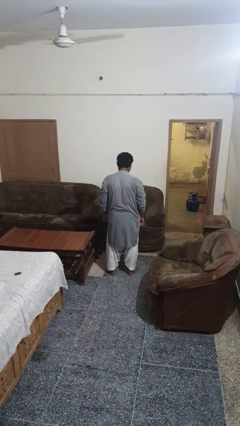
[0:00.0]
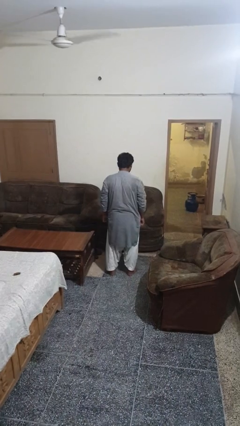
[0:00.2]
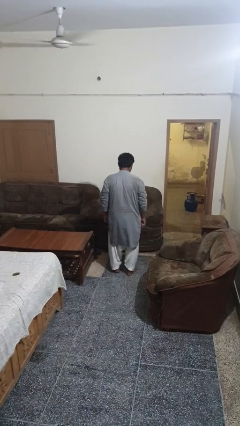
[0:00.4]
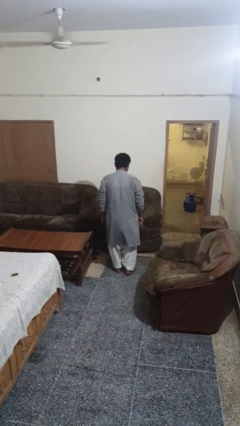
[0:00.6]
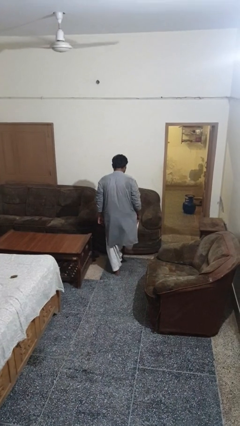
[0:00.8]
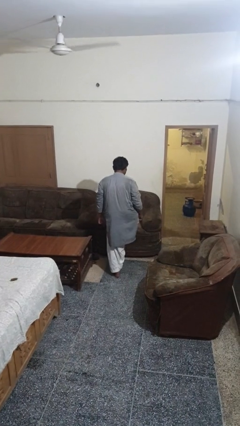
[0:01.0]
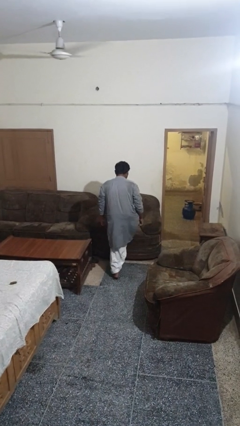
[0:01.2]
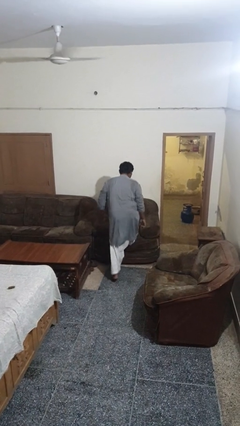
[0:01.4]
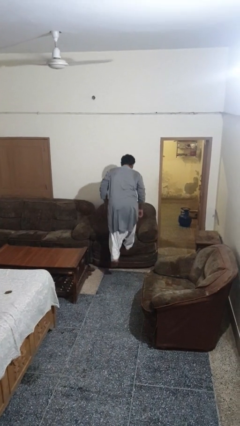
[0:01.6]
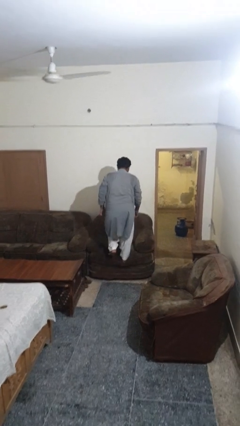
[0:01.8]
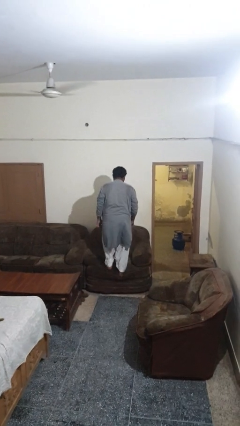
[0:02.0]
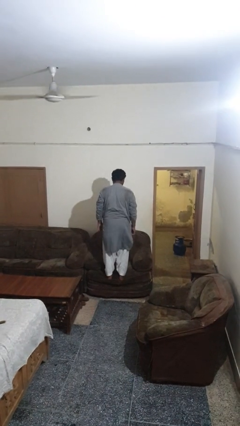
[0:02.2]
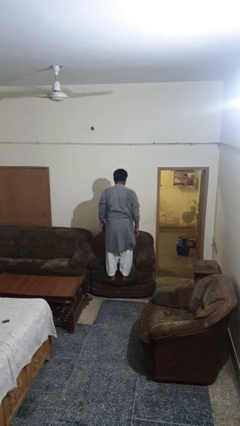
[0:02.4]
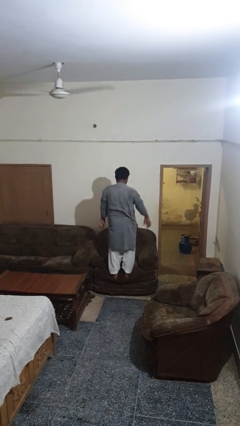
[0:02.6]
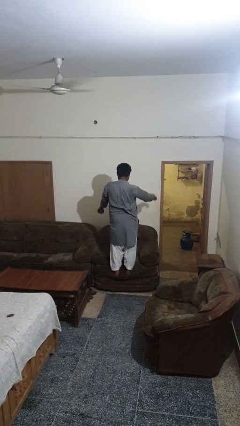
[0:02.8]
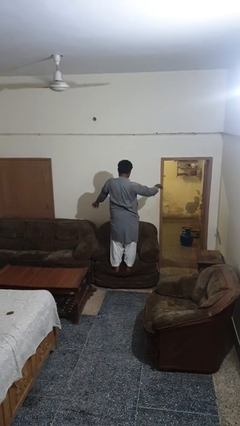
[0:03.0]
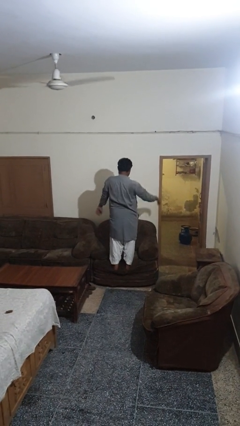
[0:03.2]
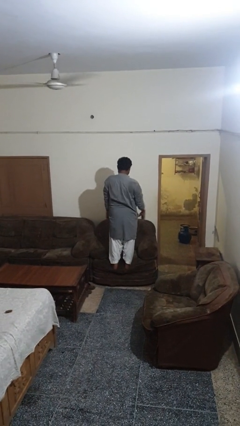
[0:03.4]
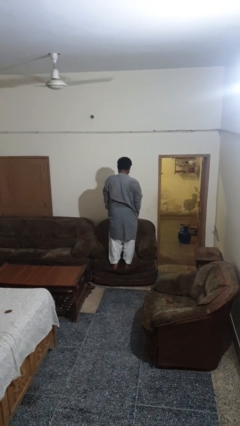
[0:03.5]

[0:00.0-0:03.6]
person climbs on couch

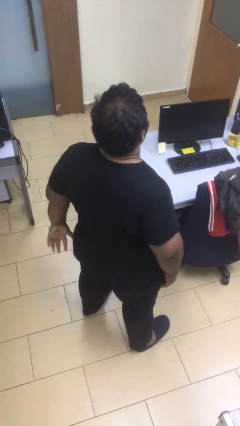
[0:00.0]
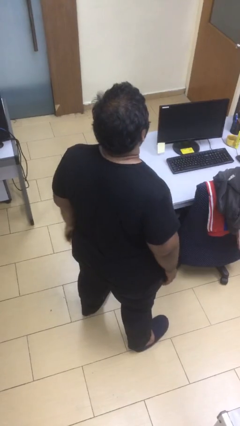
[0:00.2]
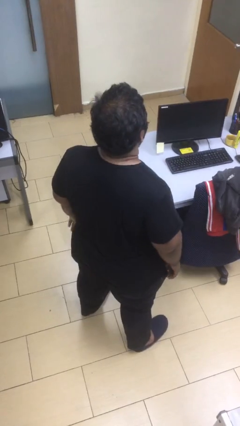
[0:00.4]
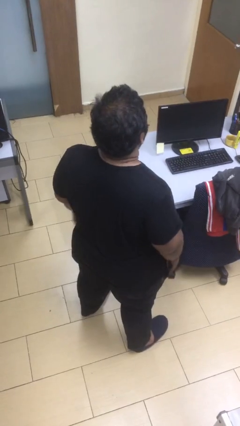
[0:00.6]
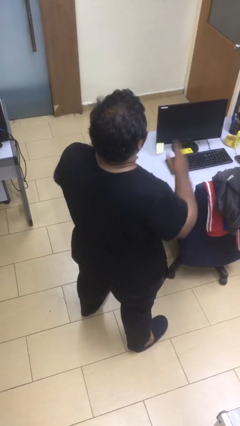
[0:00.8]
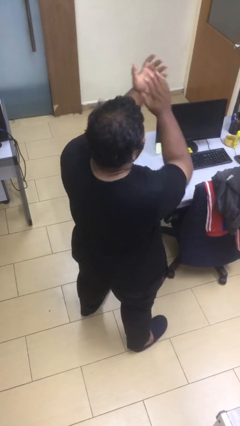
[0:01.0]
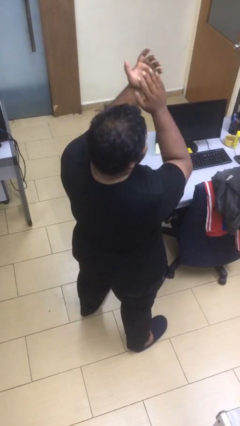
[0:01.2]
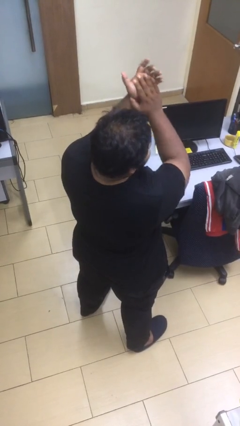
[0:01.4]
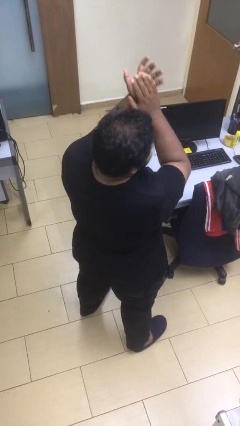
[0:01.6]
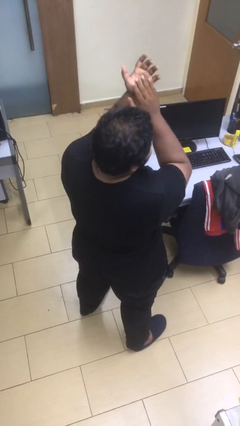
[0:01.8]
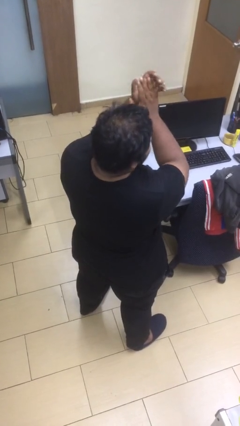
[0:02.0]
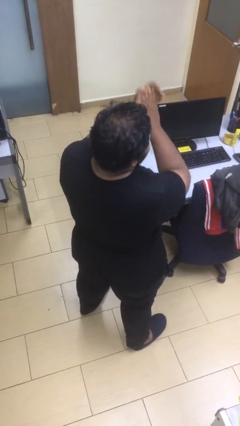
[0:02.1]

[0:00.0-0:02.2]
person claps hands

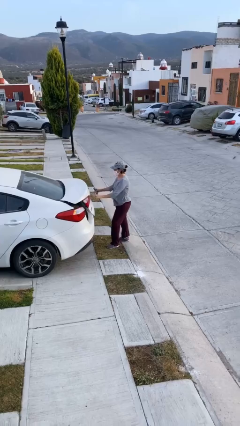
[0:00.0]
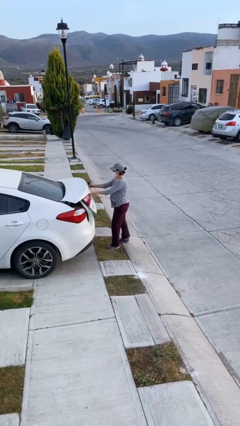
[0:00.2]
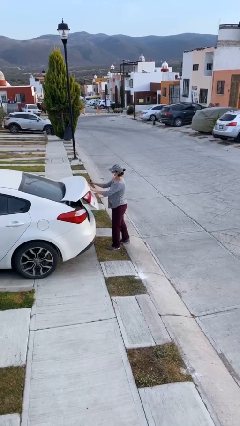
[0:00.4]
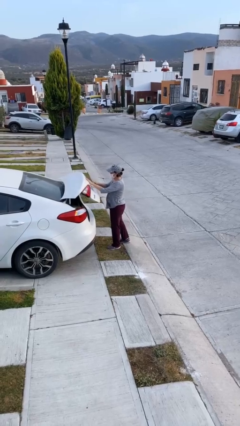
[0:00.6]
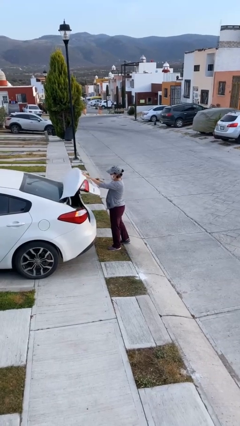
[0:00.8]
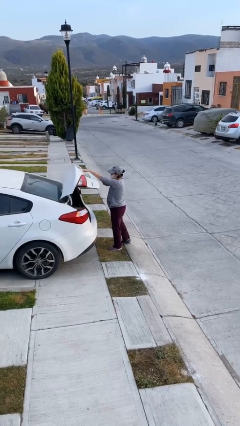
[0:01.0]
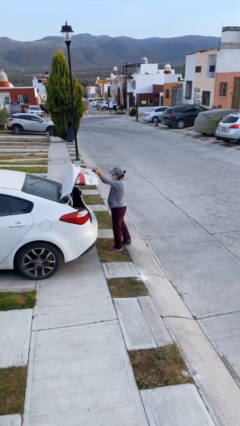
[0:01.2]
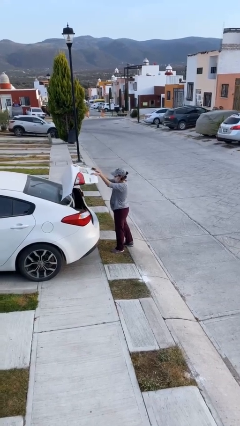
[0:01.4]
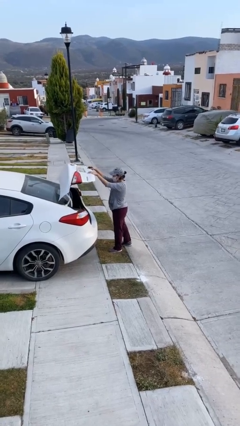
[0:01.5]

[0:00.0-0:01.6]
person opens car trunk

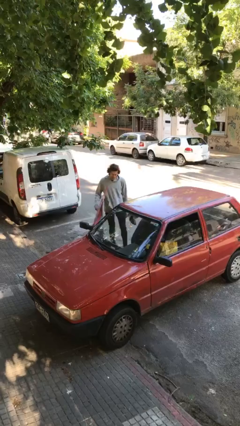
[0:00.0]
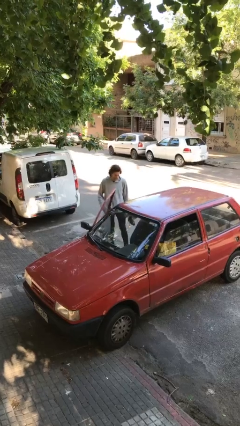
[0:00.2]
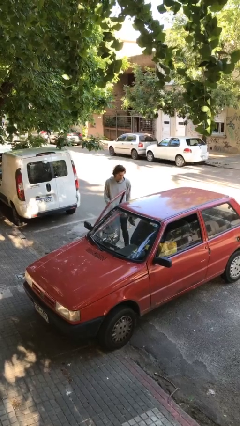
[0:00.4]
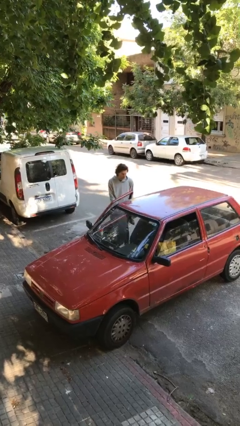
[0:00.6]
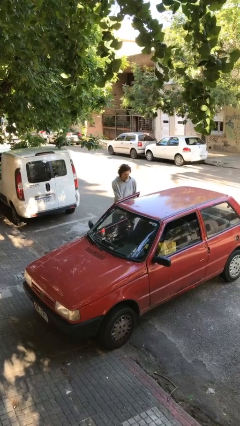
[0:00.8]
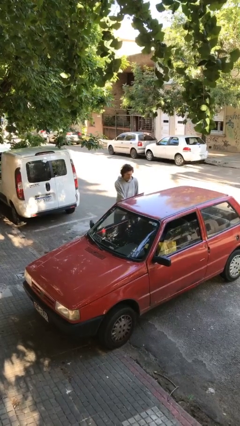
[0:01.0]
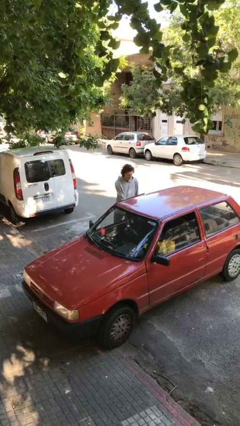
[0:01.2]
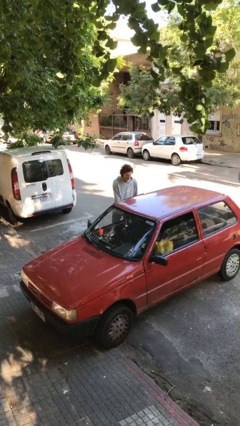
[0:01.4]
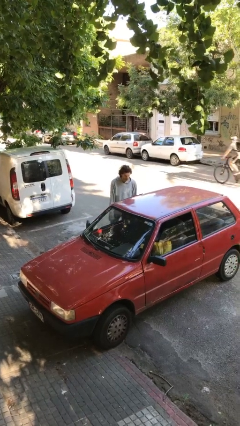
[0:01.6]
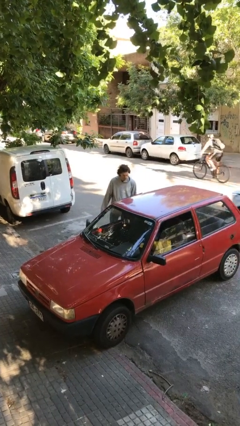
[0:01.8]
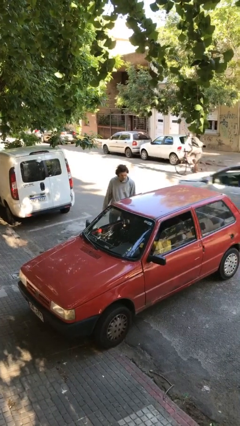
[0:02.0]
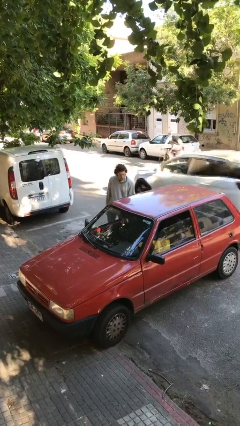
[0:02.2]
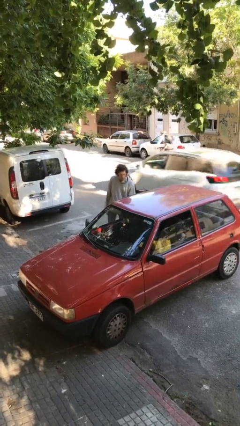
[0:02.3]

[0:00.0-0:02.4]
person closes car door

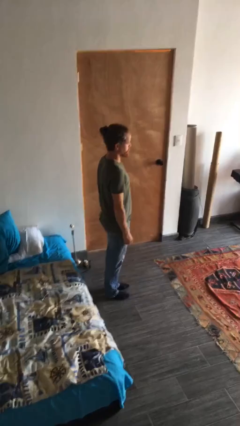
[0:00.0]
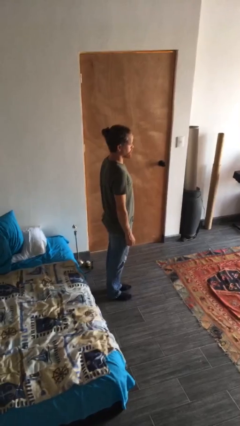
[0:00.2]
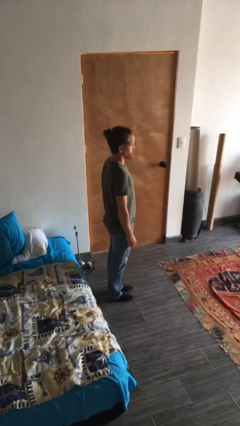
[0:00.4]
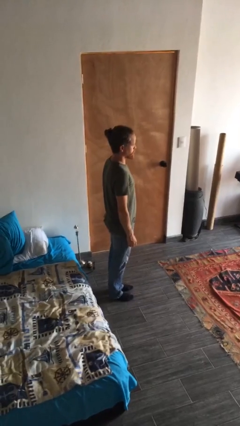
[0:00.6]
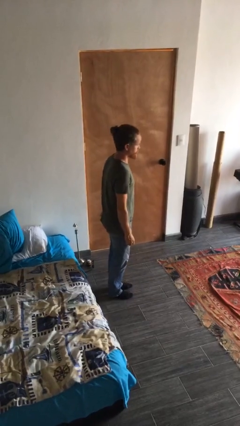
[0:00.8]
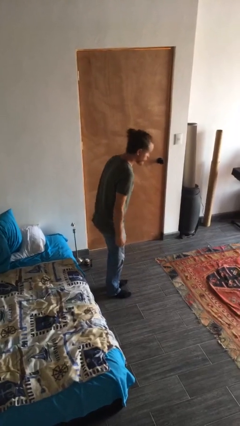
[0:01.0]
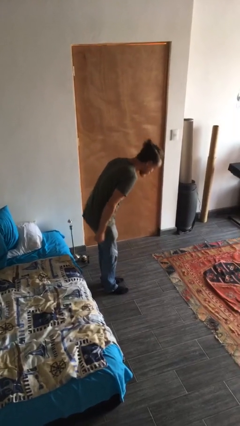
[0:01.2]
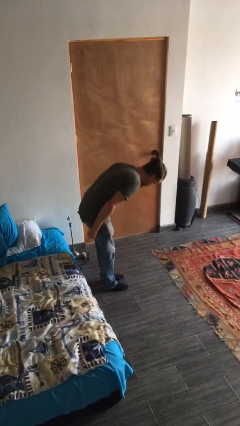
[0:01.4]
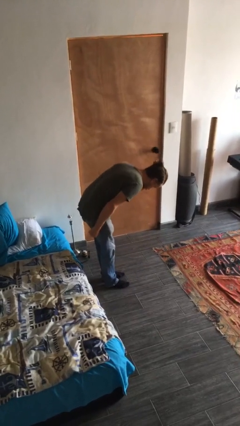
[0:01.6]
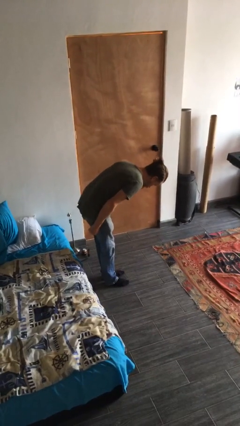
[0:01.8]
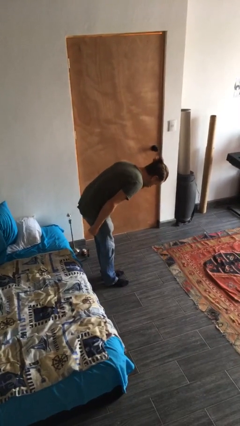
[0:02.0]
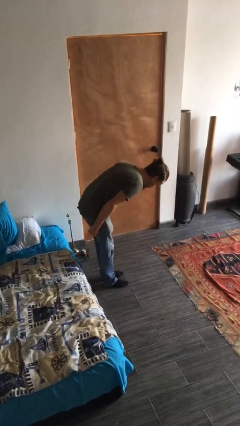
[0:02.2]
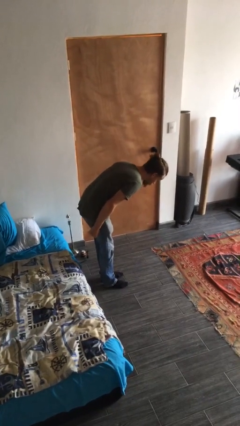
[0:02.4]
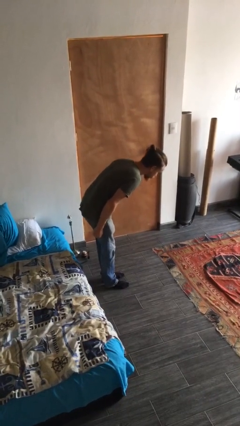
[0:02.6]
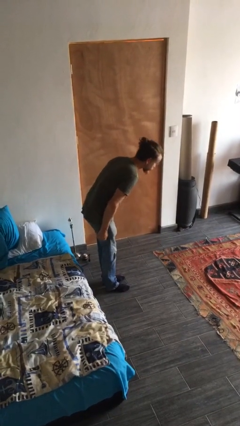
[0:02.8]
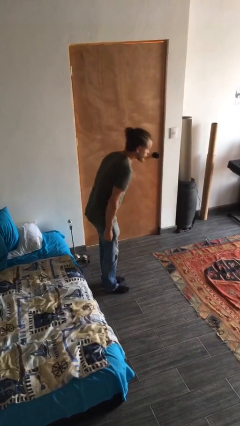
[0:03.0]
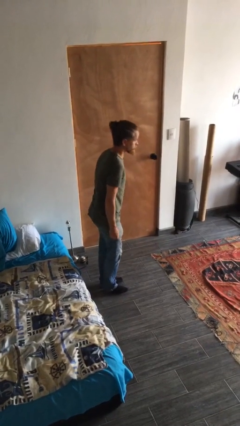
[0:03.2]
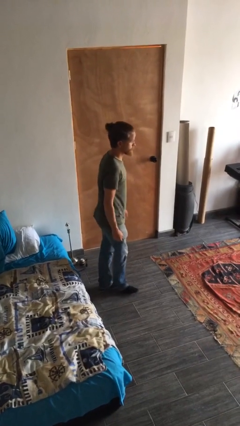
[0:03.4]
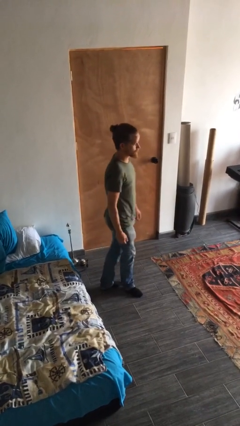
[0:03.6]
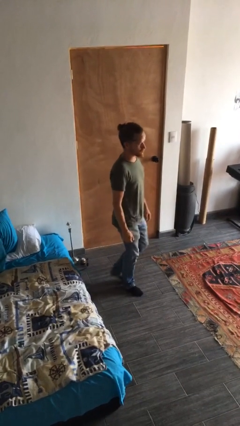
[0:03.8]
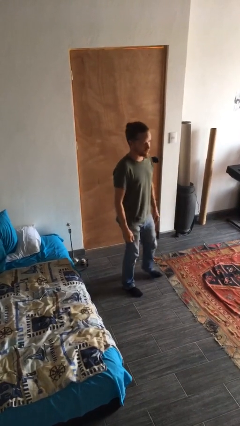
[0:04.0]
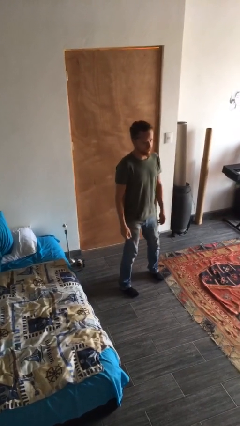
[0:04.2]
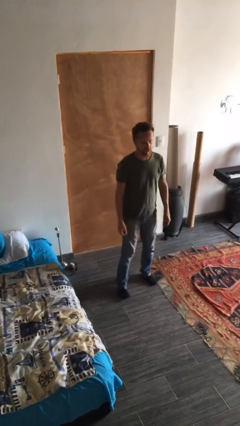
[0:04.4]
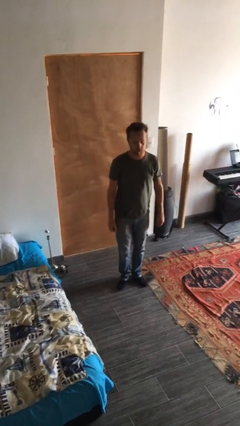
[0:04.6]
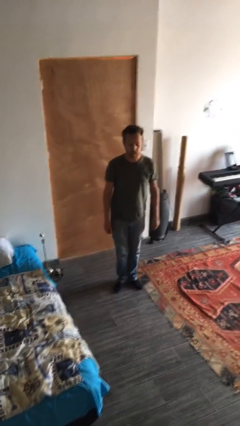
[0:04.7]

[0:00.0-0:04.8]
person bows

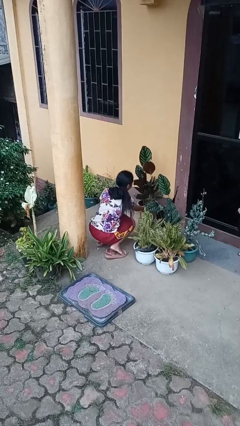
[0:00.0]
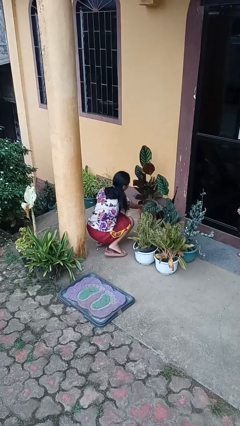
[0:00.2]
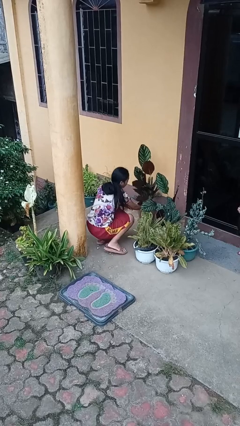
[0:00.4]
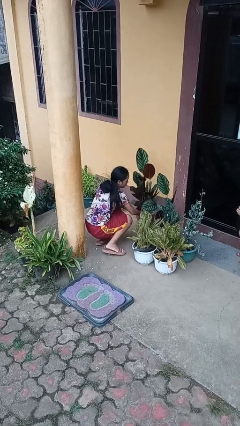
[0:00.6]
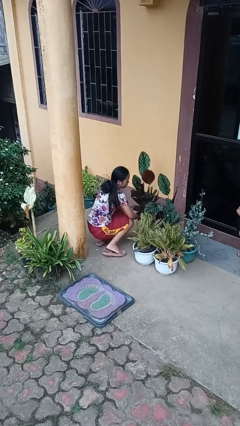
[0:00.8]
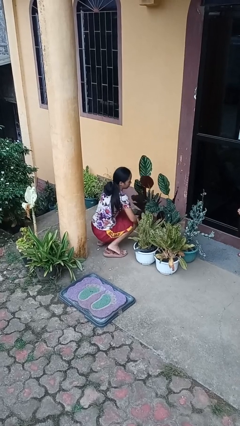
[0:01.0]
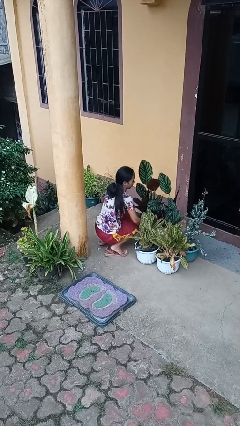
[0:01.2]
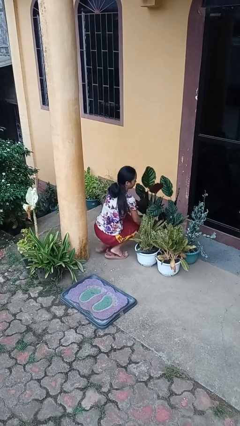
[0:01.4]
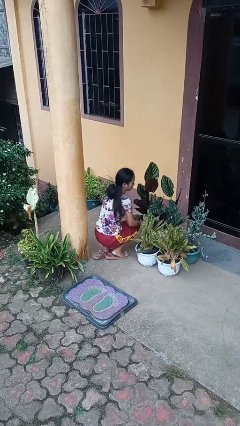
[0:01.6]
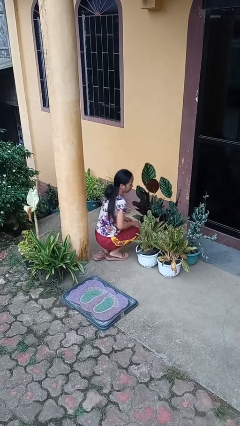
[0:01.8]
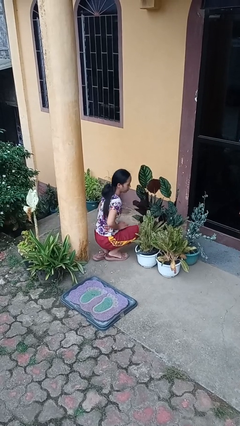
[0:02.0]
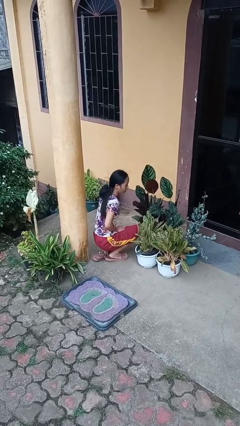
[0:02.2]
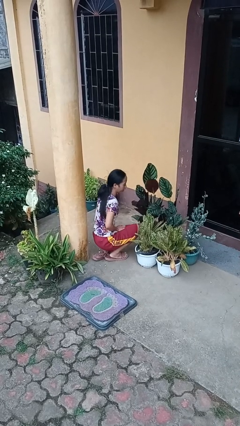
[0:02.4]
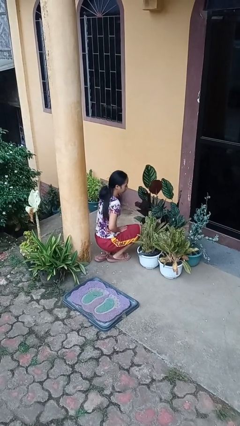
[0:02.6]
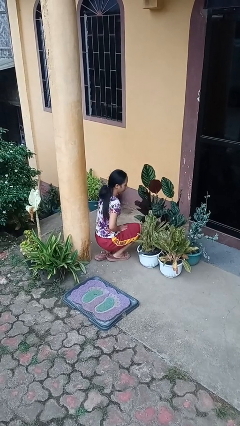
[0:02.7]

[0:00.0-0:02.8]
person arranges flowers in vase
